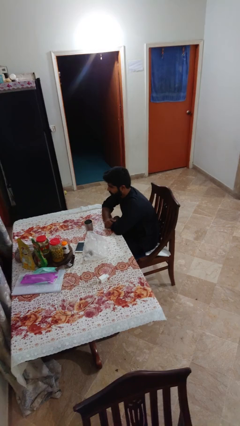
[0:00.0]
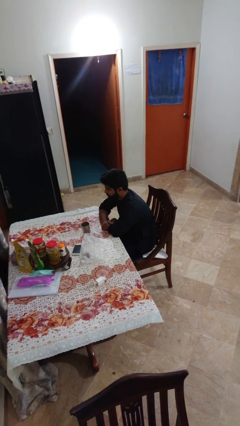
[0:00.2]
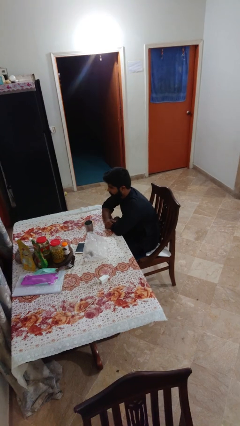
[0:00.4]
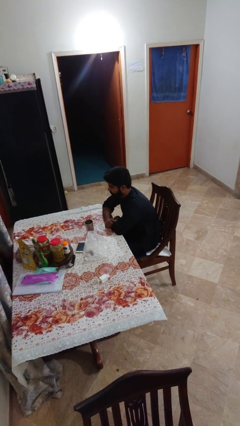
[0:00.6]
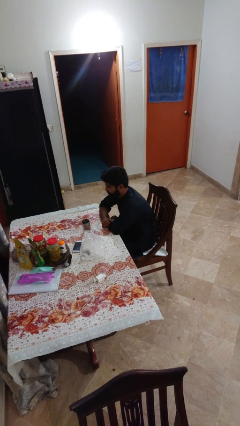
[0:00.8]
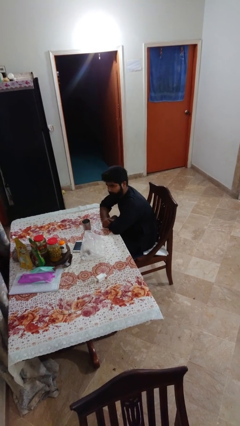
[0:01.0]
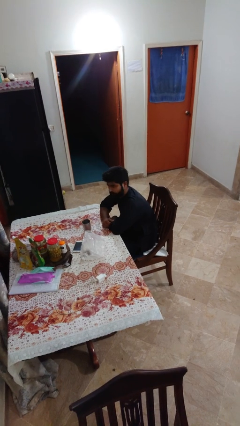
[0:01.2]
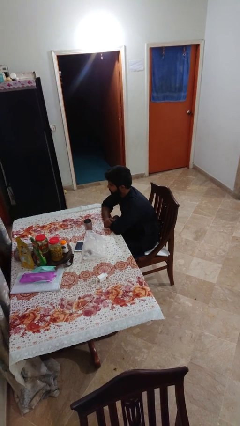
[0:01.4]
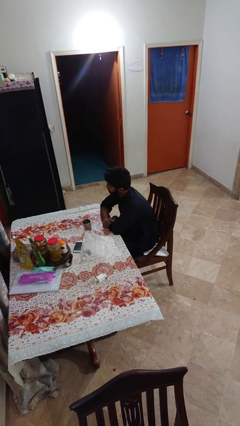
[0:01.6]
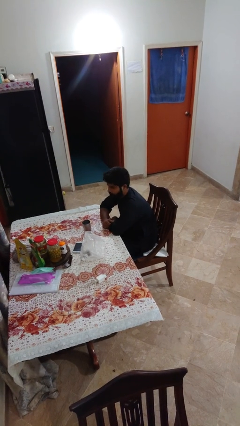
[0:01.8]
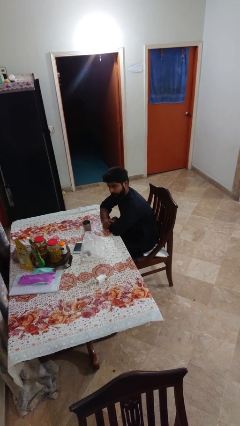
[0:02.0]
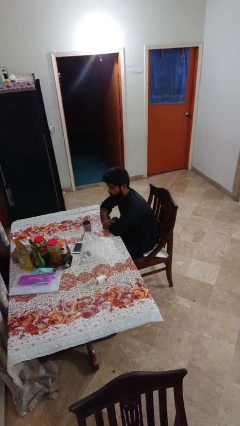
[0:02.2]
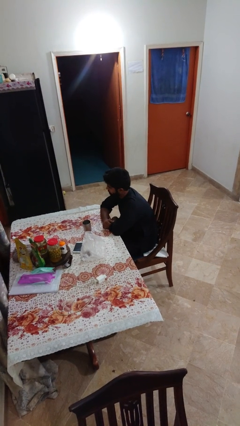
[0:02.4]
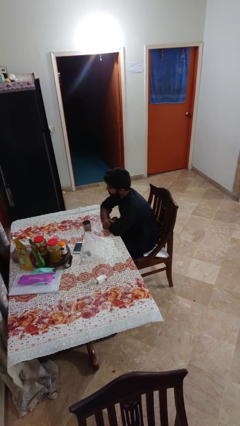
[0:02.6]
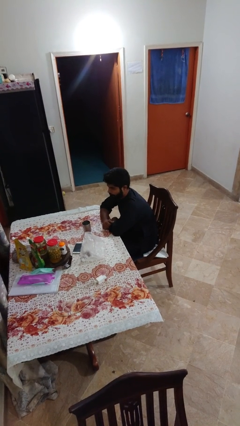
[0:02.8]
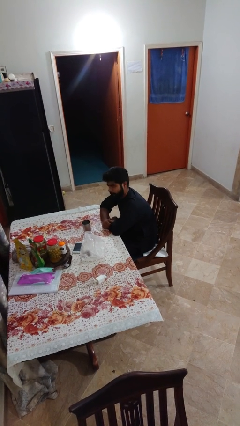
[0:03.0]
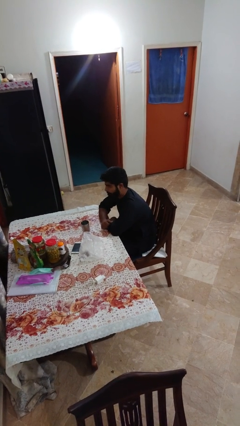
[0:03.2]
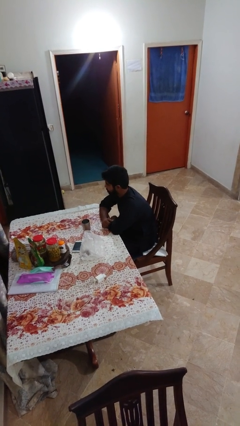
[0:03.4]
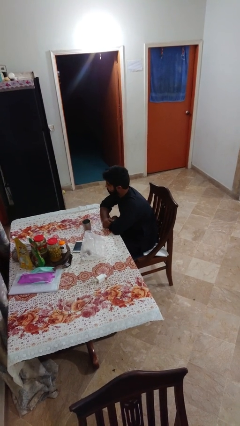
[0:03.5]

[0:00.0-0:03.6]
person shakes head

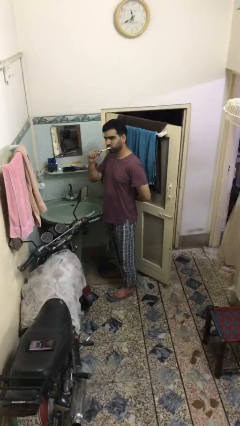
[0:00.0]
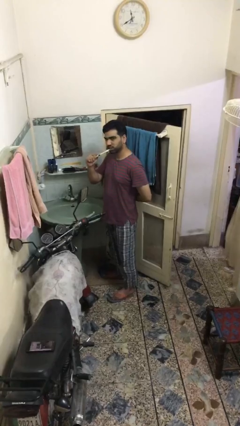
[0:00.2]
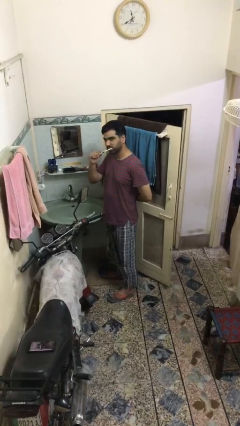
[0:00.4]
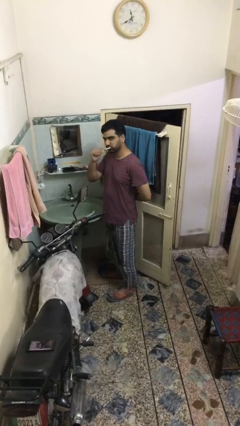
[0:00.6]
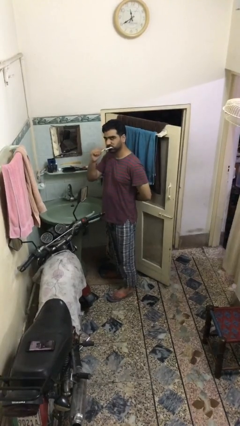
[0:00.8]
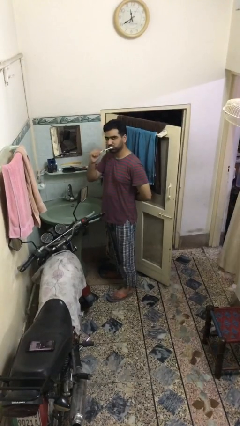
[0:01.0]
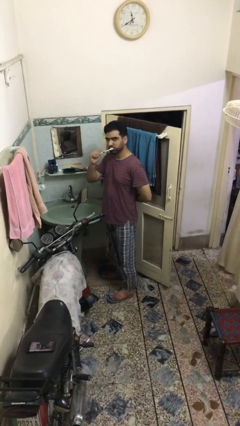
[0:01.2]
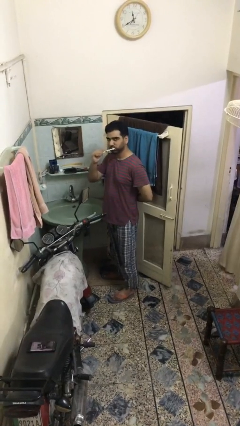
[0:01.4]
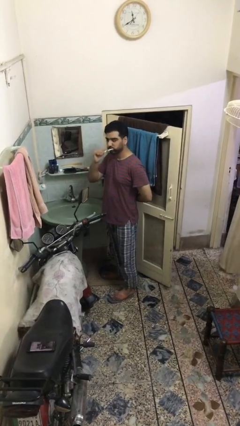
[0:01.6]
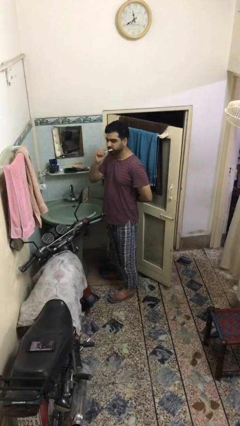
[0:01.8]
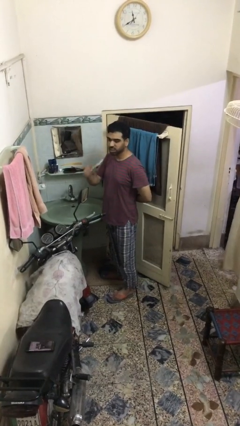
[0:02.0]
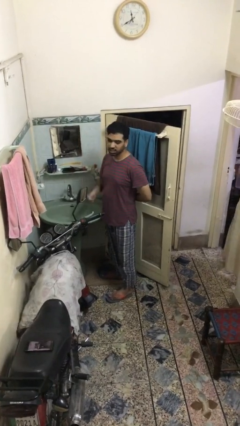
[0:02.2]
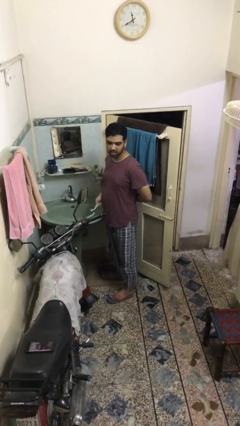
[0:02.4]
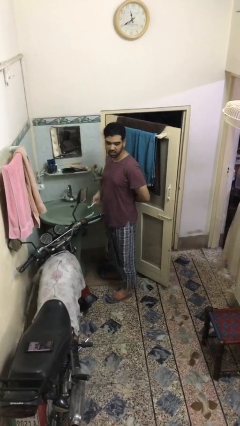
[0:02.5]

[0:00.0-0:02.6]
person brushes teeth

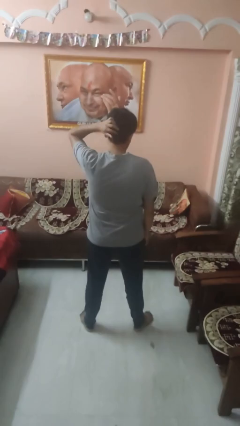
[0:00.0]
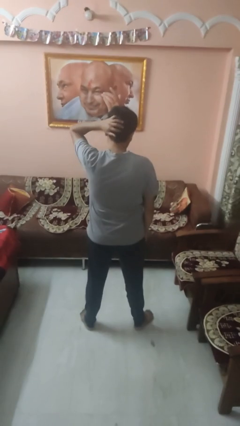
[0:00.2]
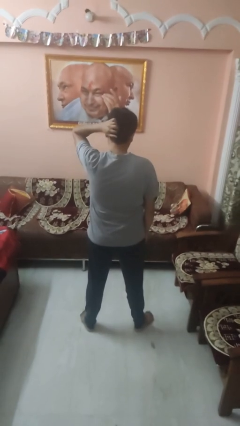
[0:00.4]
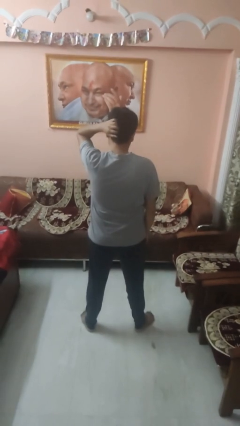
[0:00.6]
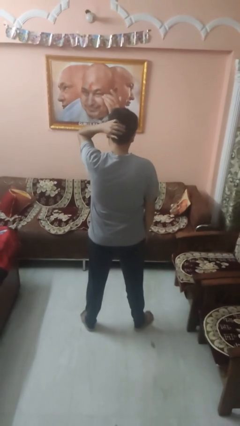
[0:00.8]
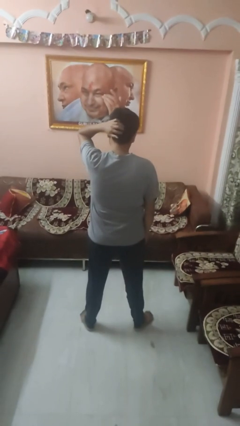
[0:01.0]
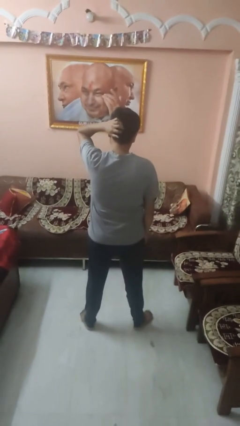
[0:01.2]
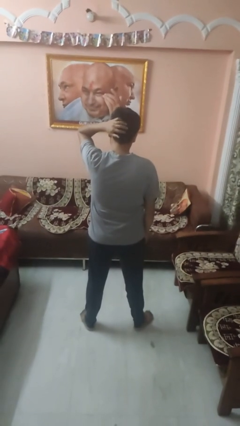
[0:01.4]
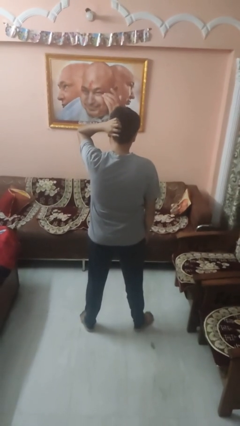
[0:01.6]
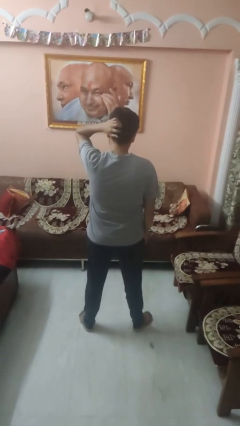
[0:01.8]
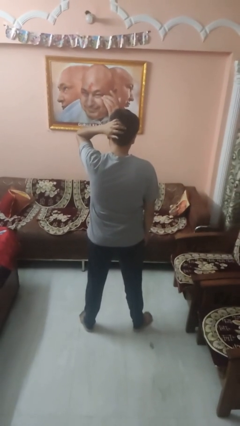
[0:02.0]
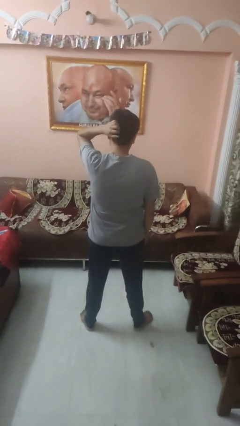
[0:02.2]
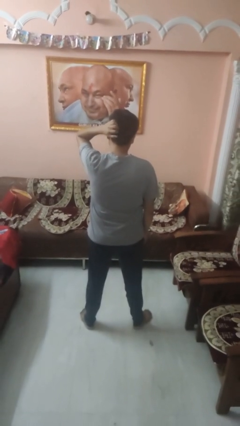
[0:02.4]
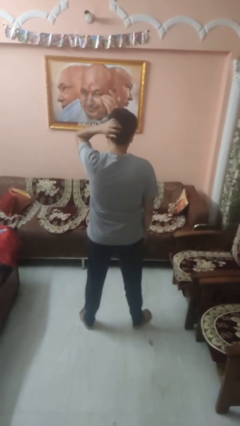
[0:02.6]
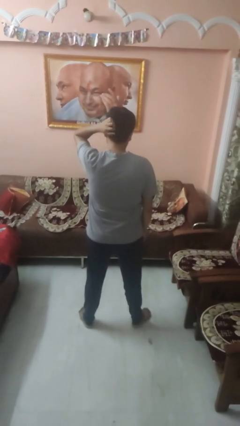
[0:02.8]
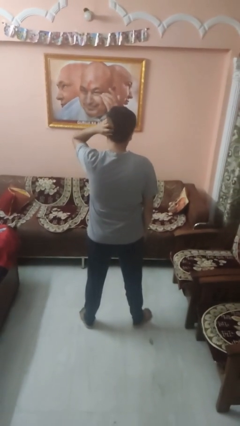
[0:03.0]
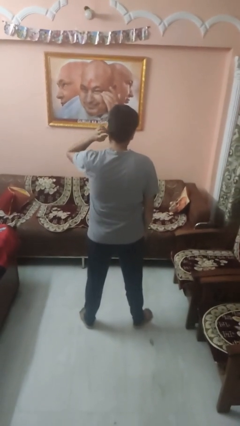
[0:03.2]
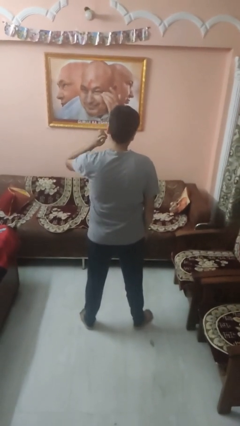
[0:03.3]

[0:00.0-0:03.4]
person scratches face

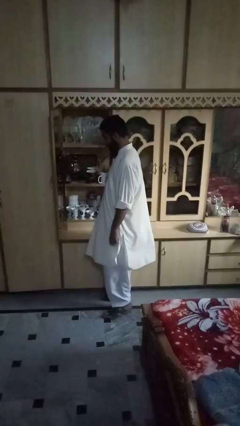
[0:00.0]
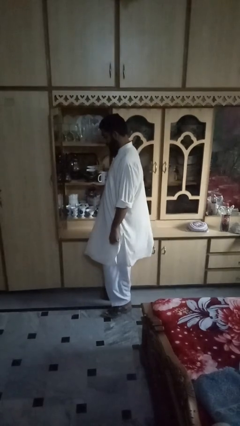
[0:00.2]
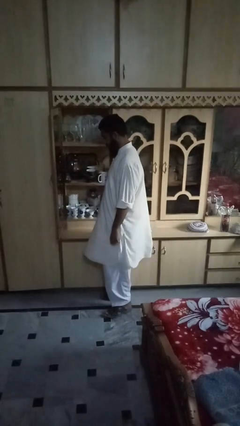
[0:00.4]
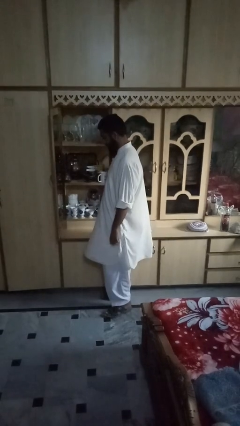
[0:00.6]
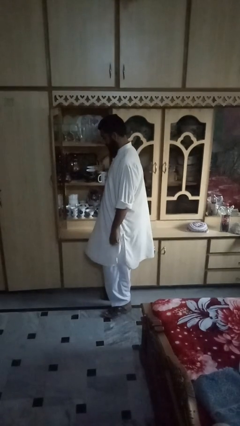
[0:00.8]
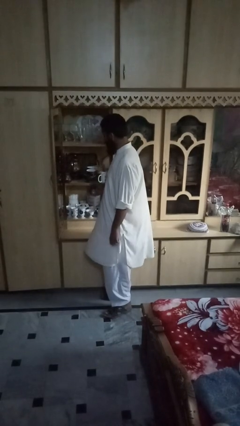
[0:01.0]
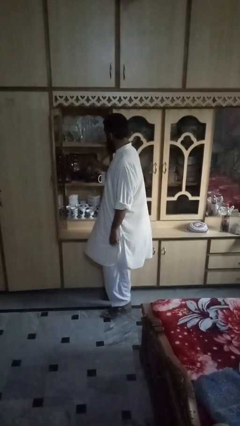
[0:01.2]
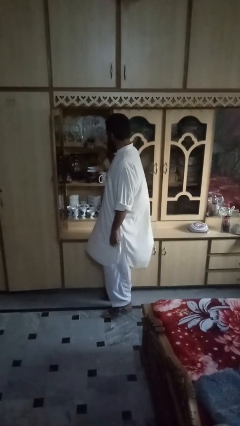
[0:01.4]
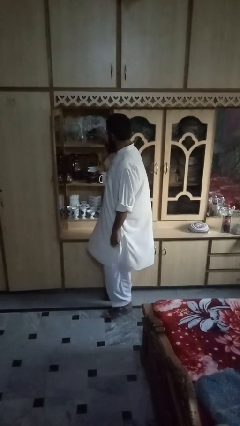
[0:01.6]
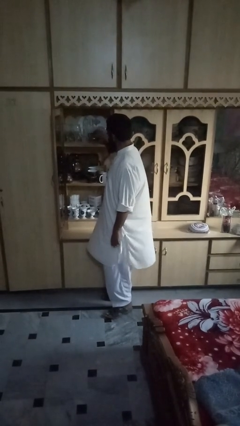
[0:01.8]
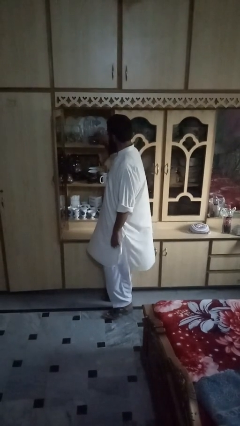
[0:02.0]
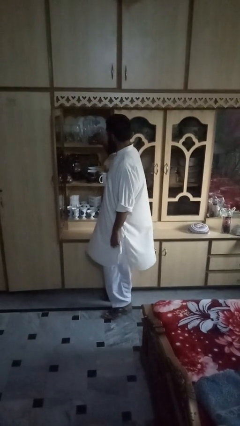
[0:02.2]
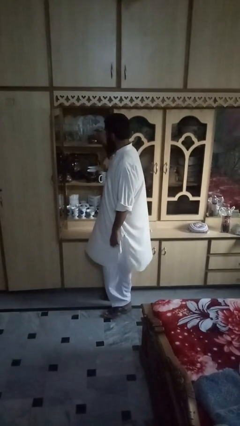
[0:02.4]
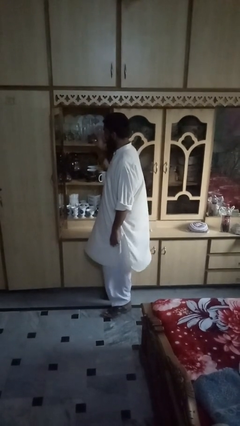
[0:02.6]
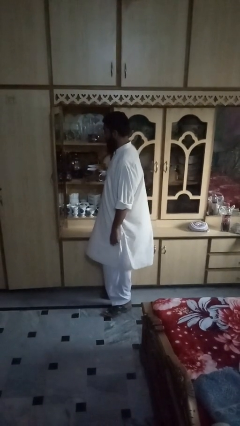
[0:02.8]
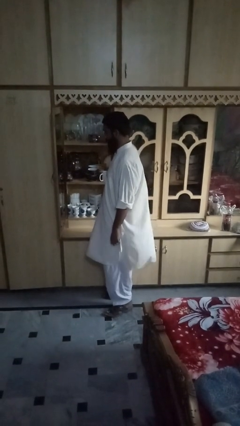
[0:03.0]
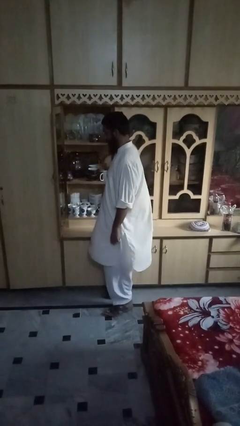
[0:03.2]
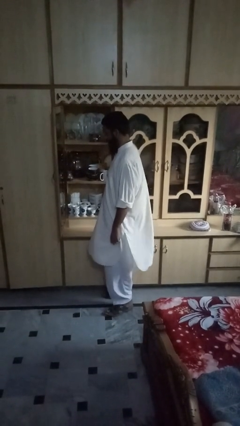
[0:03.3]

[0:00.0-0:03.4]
person puts down object on shelf

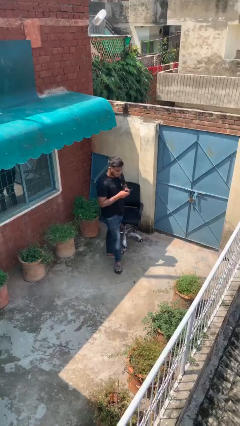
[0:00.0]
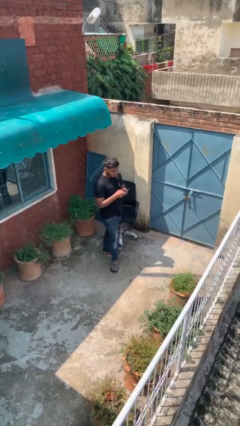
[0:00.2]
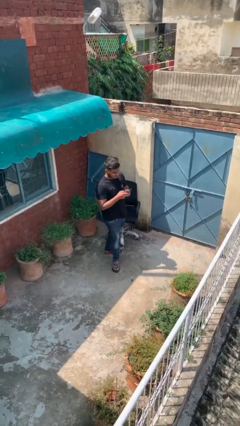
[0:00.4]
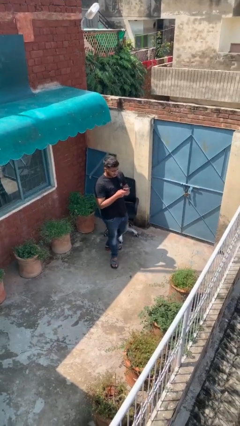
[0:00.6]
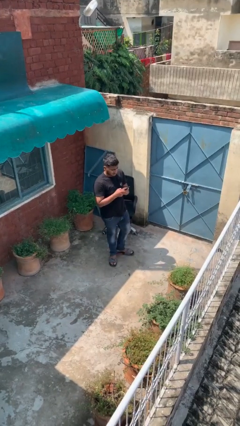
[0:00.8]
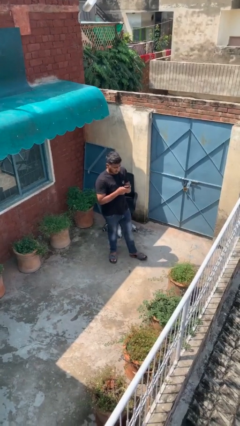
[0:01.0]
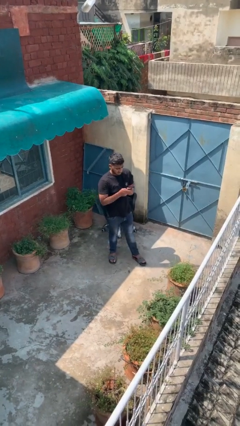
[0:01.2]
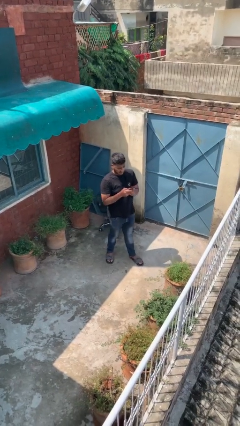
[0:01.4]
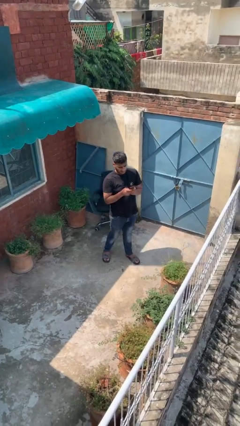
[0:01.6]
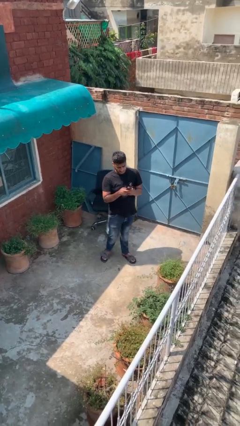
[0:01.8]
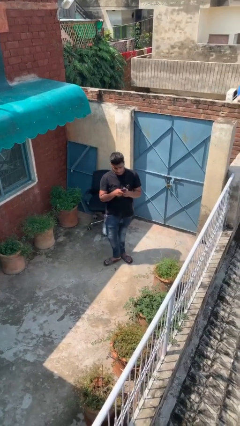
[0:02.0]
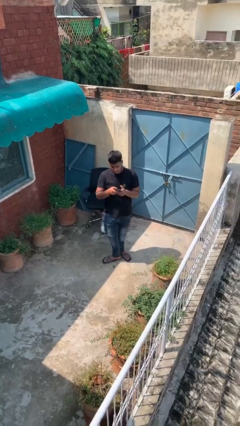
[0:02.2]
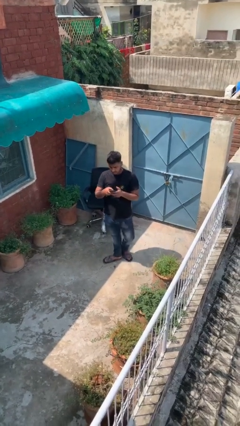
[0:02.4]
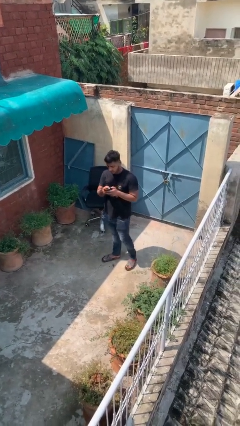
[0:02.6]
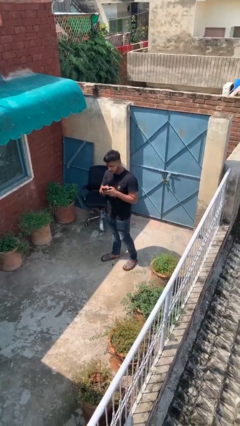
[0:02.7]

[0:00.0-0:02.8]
person texts on phone
